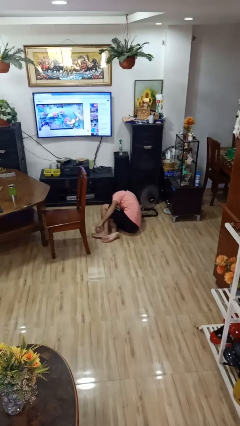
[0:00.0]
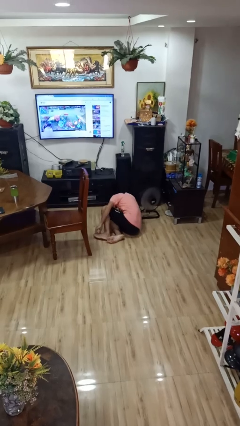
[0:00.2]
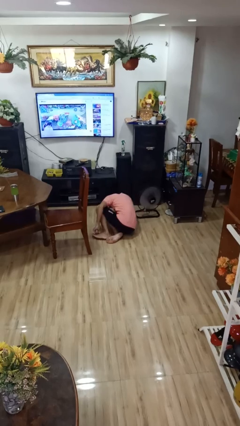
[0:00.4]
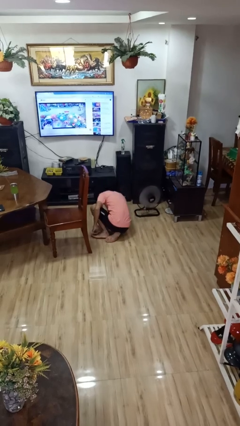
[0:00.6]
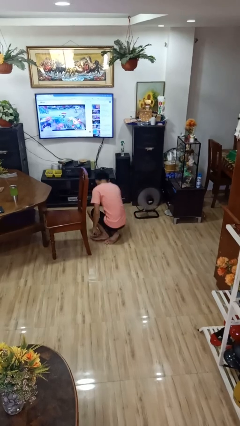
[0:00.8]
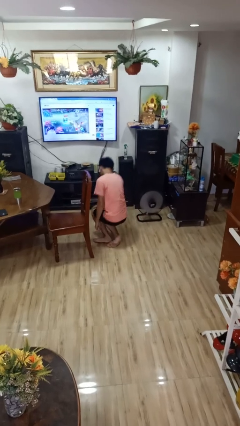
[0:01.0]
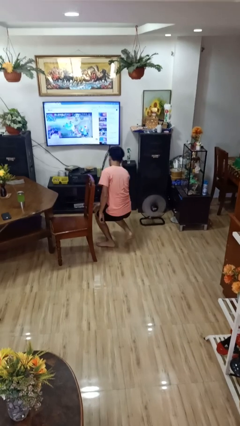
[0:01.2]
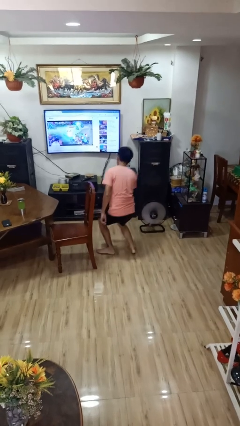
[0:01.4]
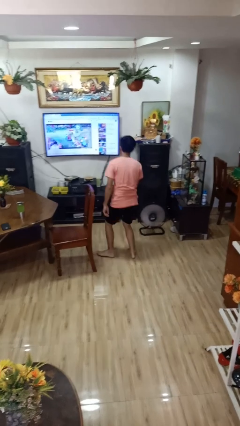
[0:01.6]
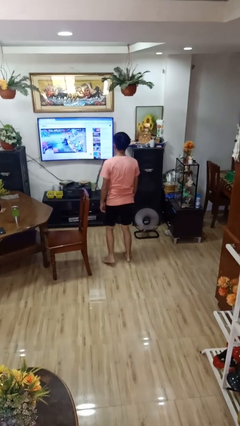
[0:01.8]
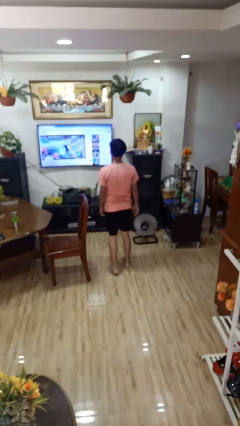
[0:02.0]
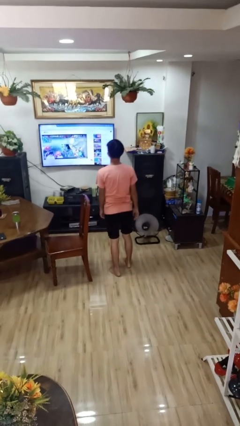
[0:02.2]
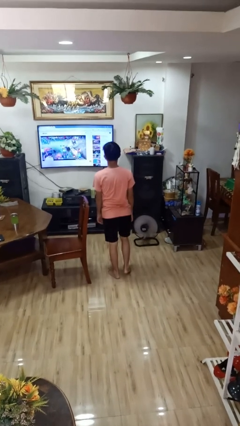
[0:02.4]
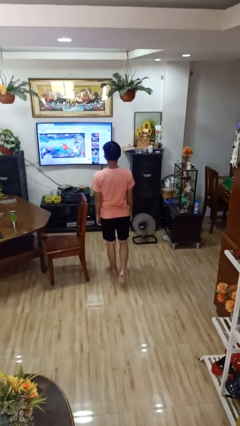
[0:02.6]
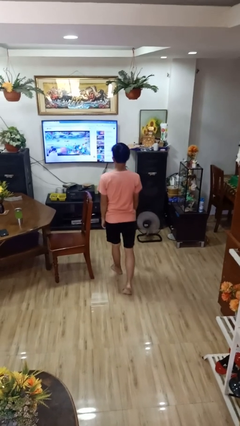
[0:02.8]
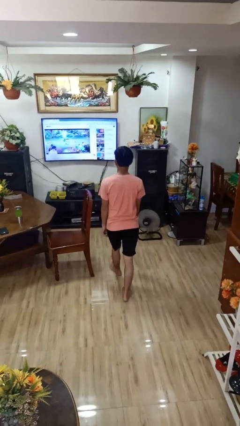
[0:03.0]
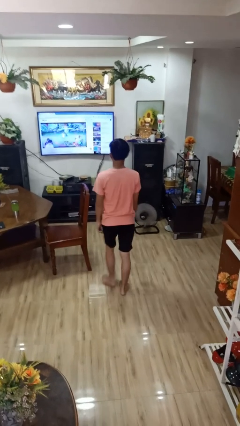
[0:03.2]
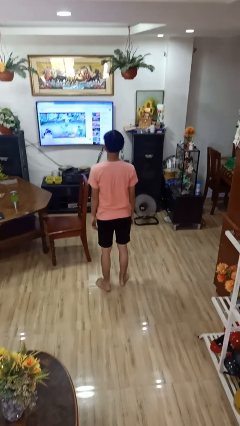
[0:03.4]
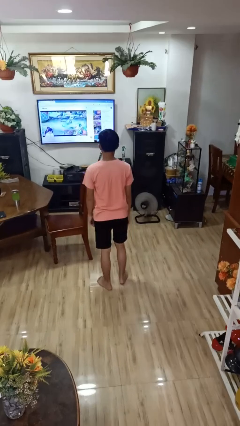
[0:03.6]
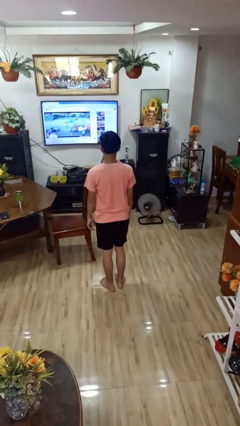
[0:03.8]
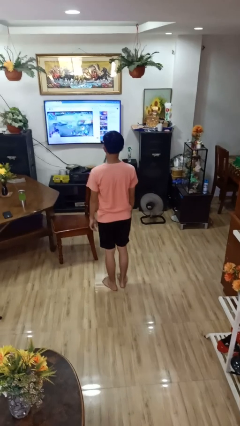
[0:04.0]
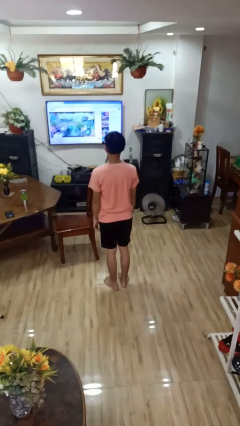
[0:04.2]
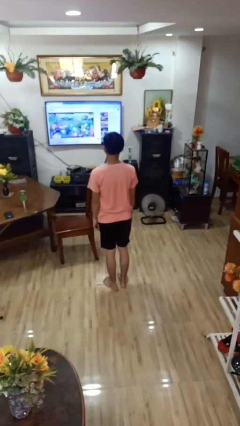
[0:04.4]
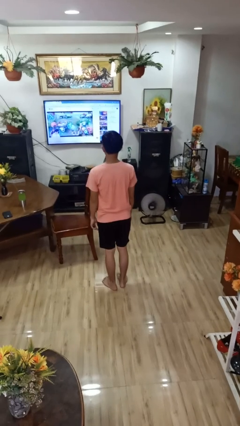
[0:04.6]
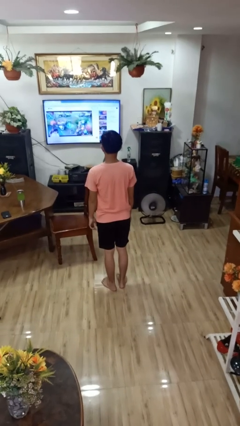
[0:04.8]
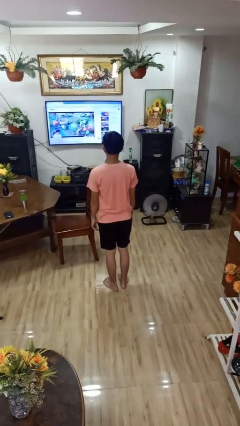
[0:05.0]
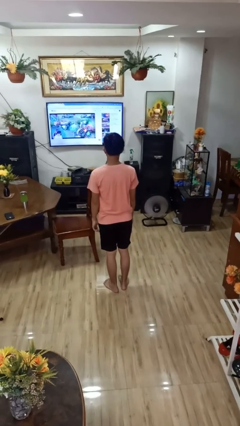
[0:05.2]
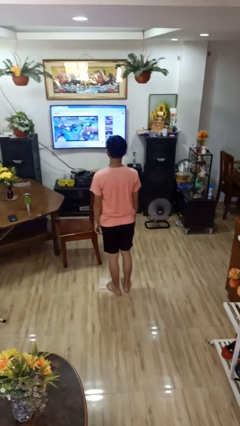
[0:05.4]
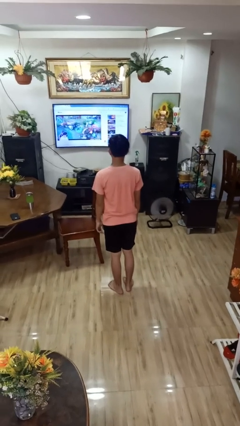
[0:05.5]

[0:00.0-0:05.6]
person stands up from floor

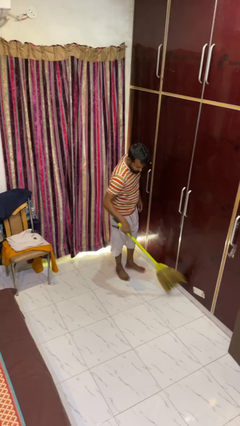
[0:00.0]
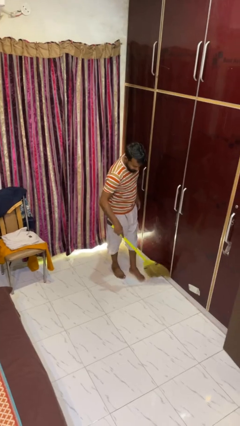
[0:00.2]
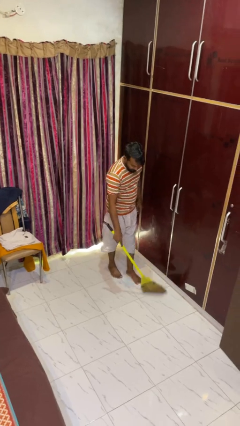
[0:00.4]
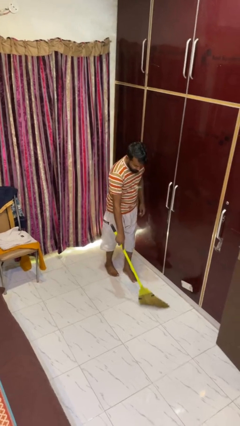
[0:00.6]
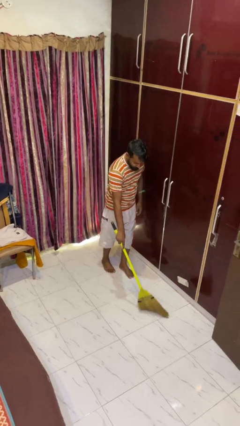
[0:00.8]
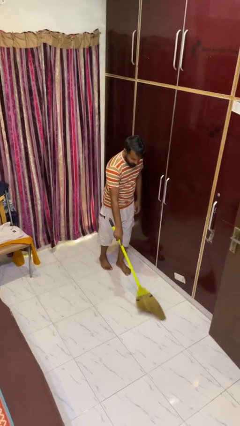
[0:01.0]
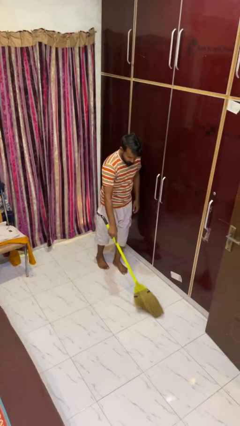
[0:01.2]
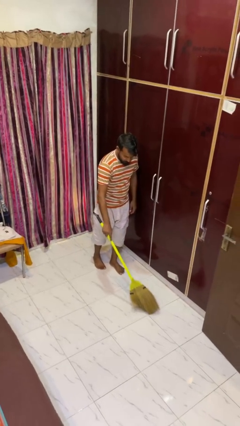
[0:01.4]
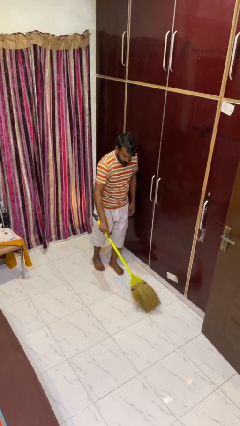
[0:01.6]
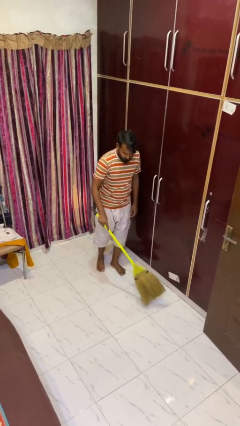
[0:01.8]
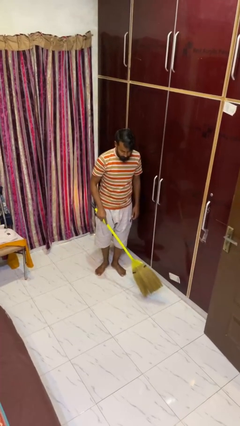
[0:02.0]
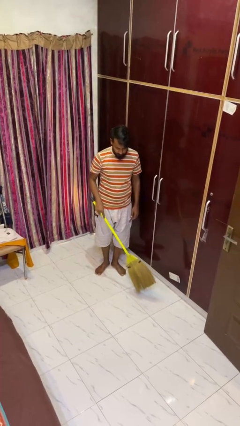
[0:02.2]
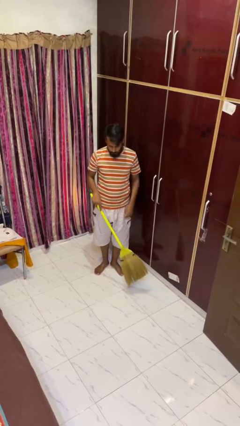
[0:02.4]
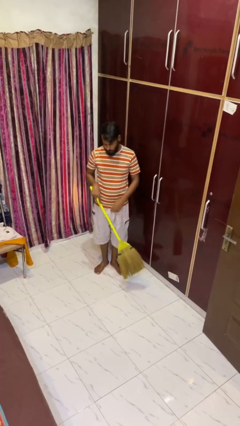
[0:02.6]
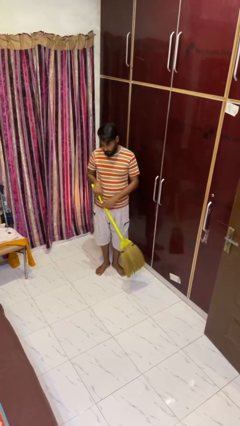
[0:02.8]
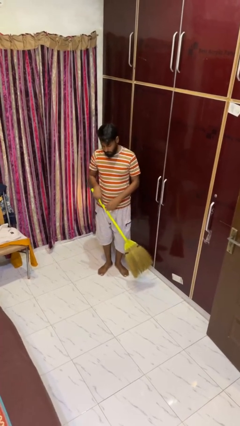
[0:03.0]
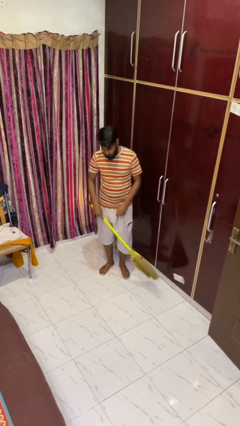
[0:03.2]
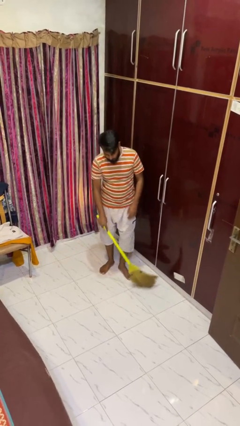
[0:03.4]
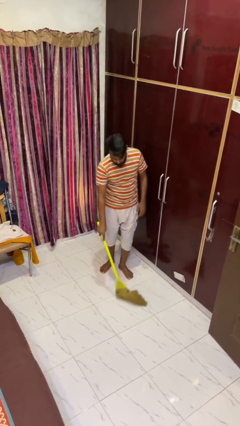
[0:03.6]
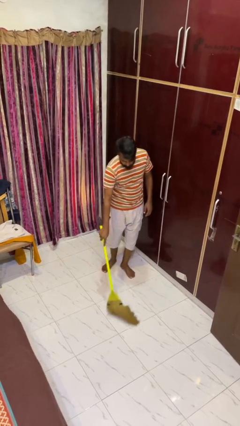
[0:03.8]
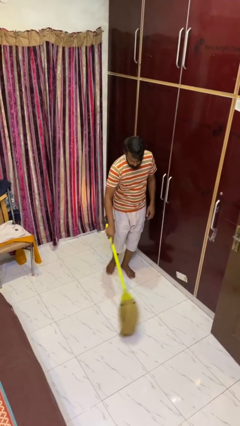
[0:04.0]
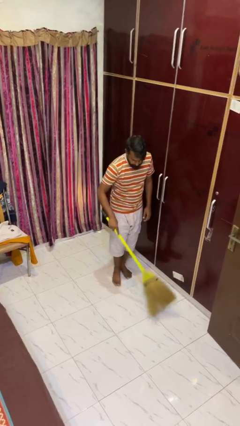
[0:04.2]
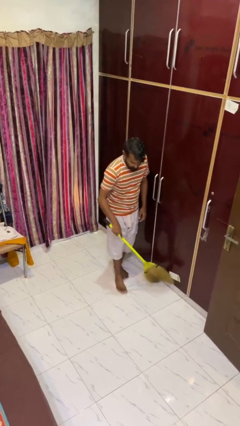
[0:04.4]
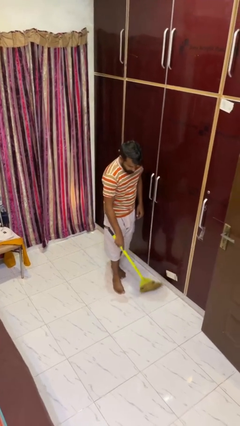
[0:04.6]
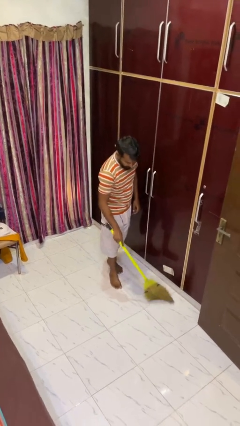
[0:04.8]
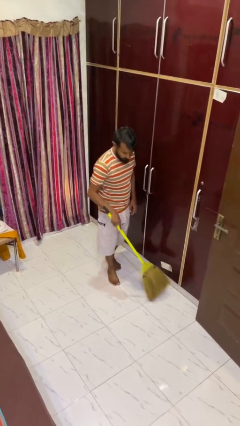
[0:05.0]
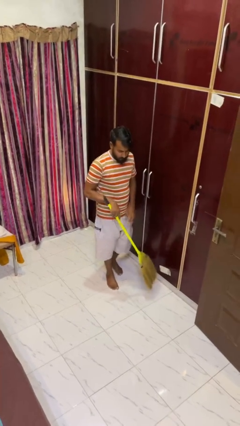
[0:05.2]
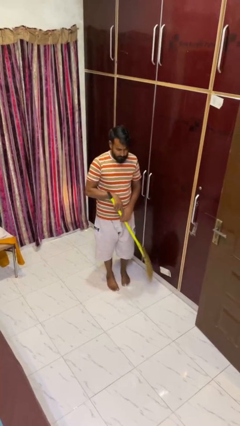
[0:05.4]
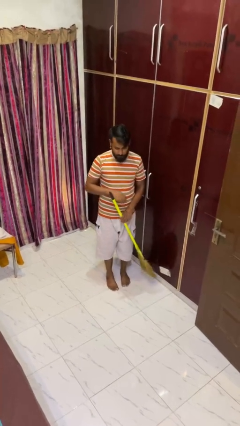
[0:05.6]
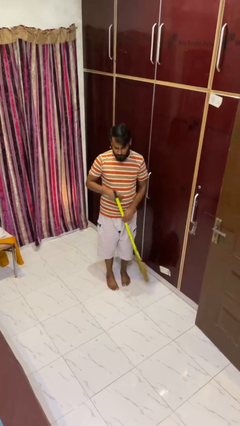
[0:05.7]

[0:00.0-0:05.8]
person sweeps floor

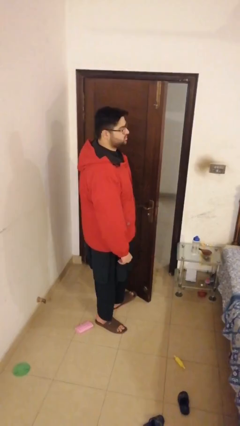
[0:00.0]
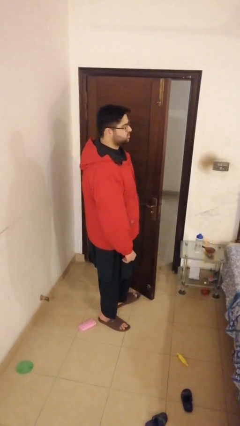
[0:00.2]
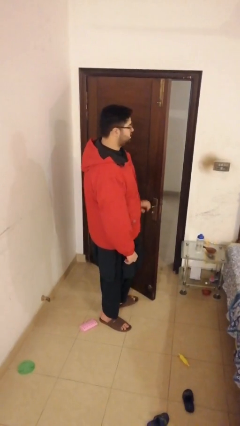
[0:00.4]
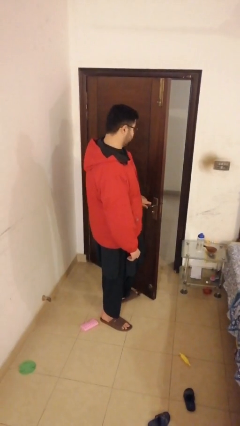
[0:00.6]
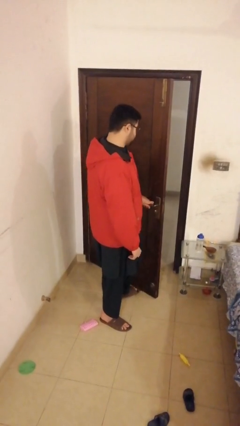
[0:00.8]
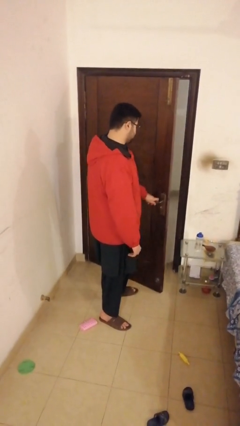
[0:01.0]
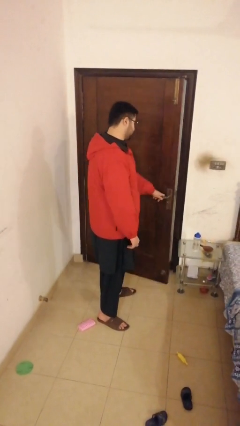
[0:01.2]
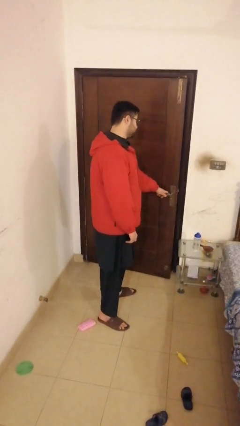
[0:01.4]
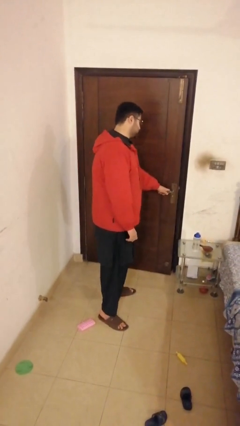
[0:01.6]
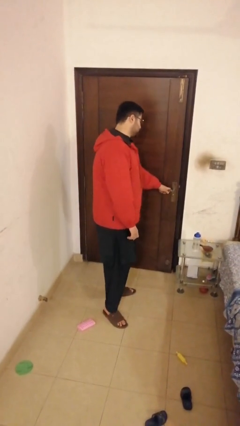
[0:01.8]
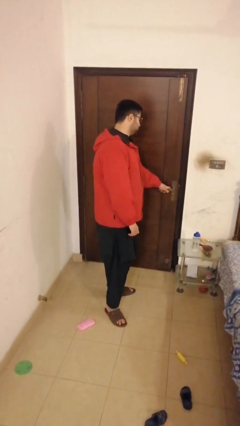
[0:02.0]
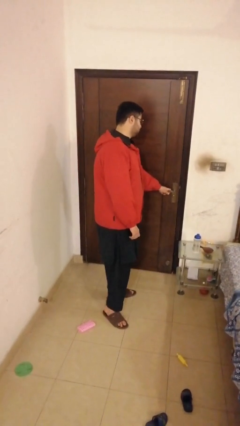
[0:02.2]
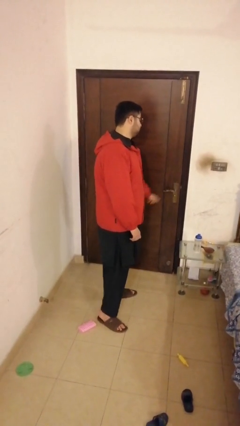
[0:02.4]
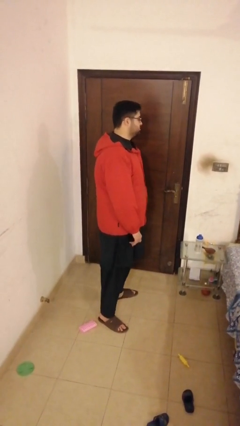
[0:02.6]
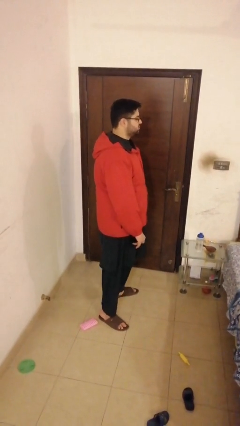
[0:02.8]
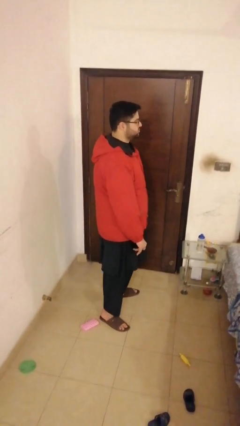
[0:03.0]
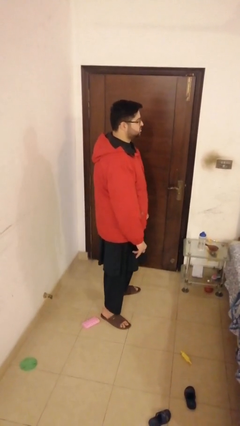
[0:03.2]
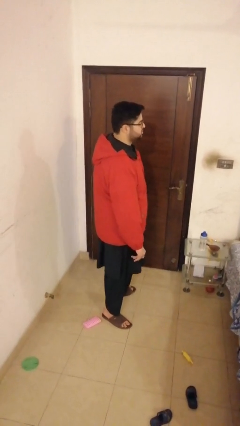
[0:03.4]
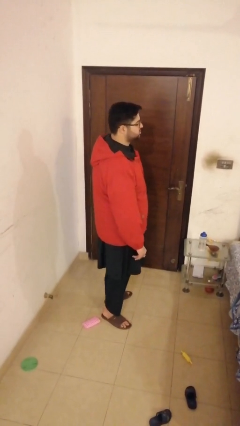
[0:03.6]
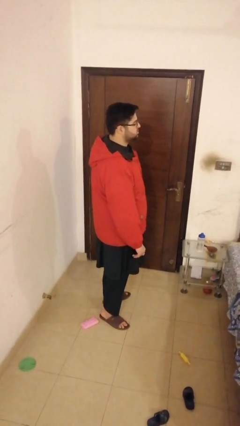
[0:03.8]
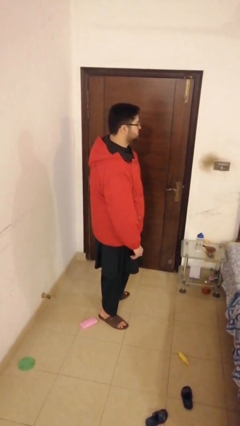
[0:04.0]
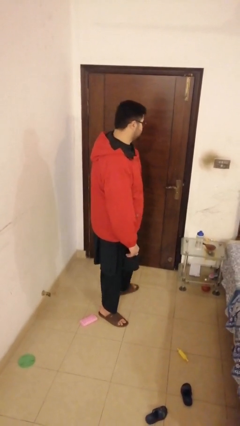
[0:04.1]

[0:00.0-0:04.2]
person closes facility door

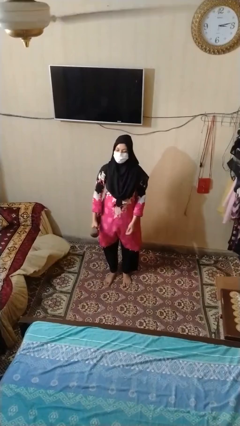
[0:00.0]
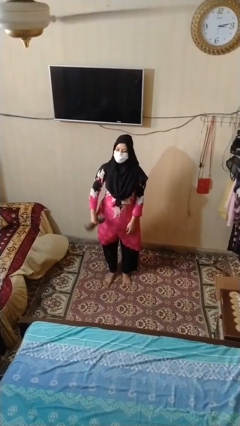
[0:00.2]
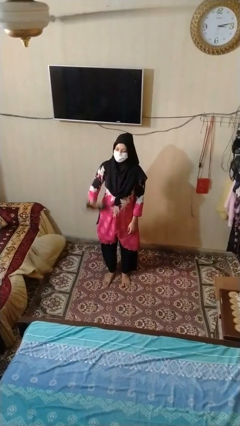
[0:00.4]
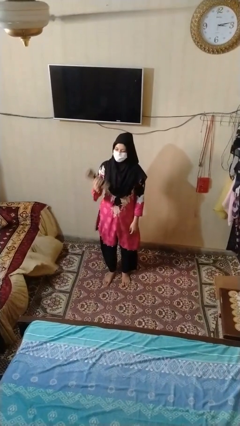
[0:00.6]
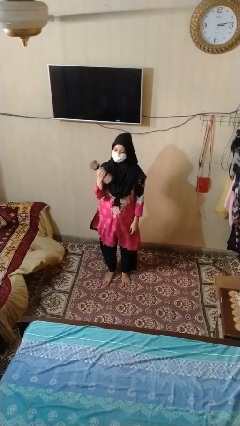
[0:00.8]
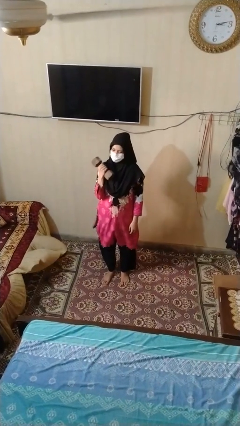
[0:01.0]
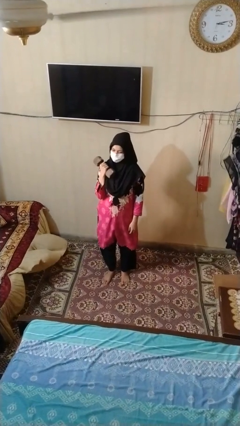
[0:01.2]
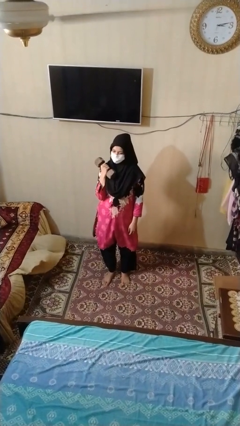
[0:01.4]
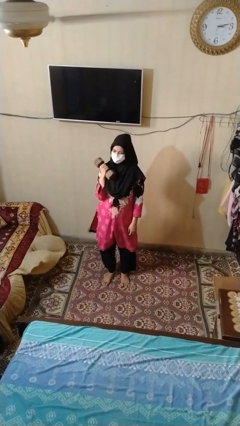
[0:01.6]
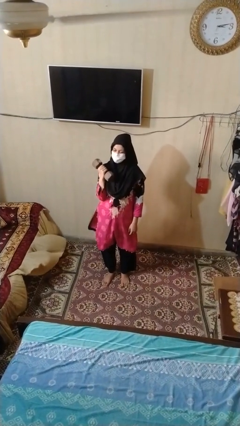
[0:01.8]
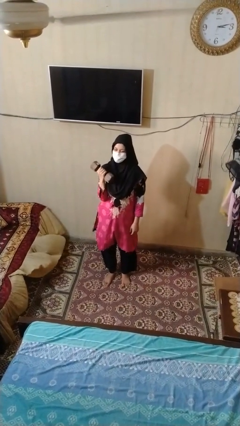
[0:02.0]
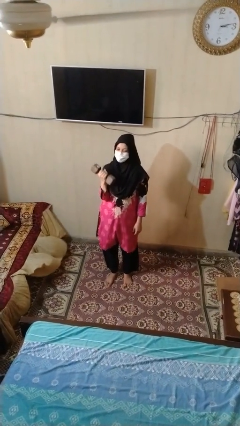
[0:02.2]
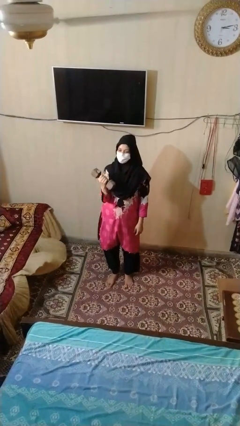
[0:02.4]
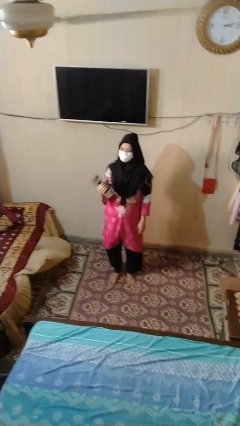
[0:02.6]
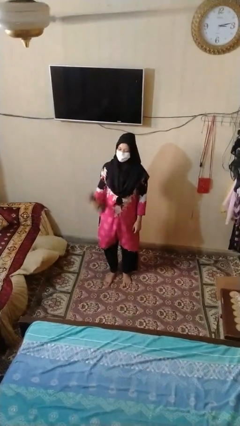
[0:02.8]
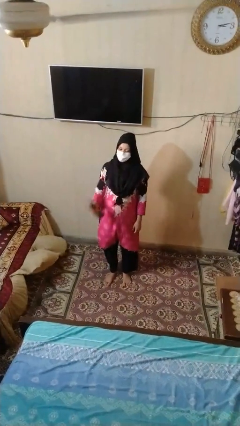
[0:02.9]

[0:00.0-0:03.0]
person lifts dumbbells
